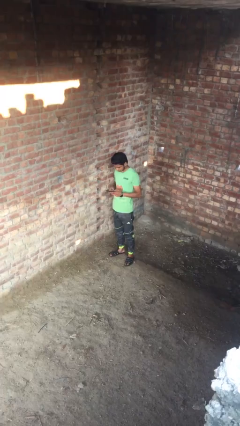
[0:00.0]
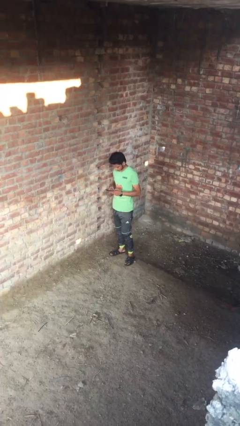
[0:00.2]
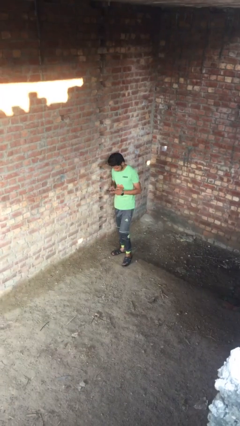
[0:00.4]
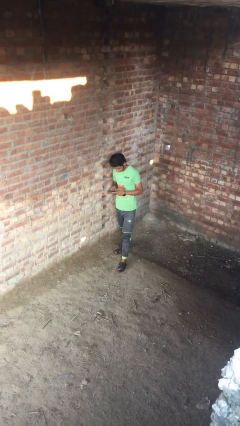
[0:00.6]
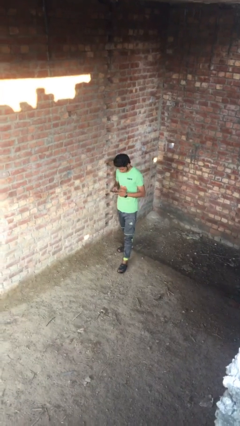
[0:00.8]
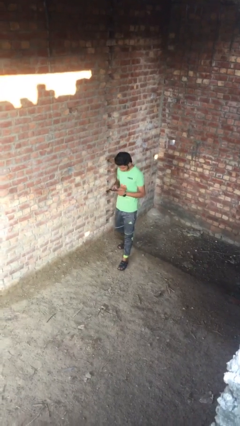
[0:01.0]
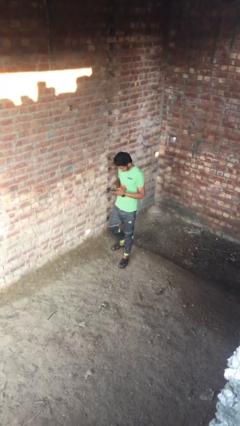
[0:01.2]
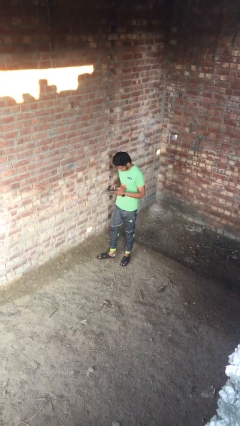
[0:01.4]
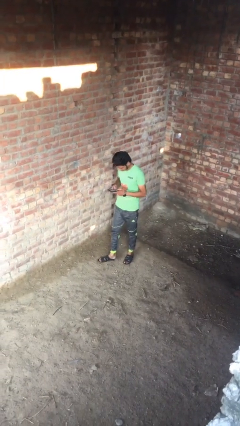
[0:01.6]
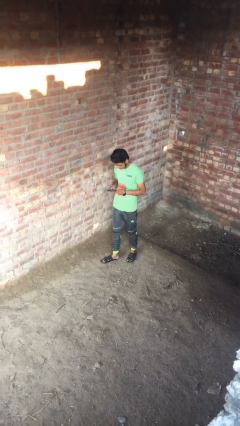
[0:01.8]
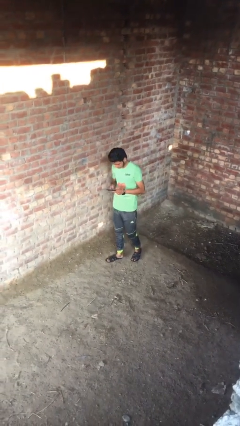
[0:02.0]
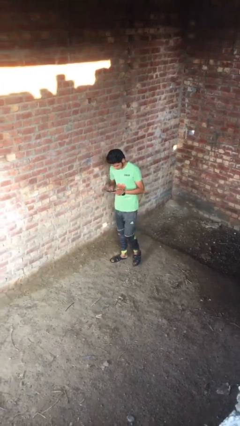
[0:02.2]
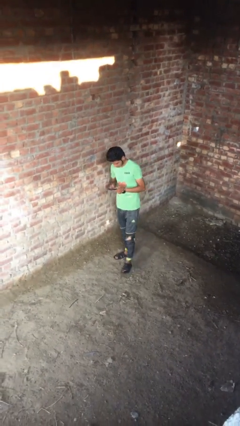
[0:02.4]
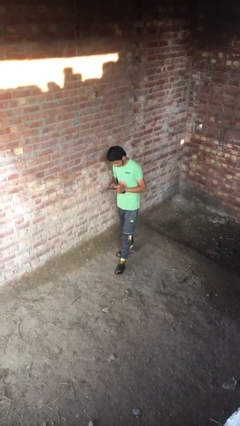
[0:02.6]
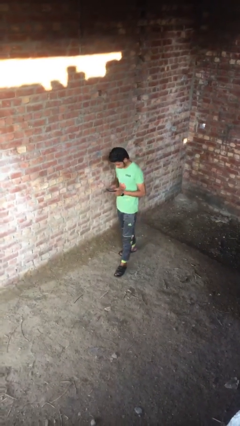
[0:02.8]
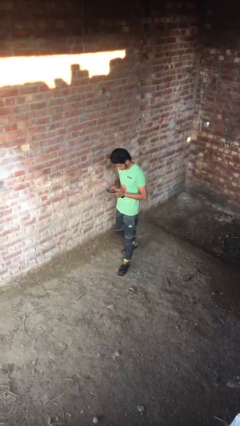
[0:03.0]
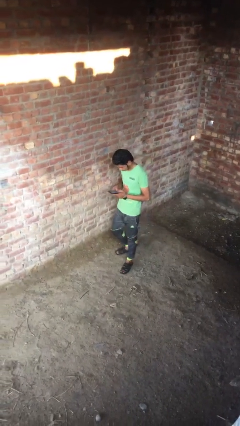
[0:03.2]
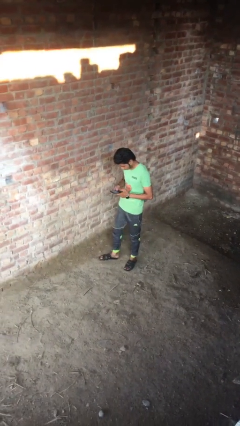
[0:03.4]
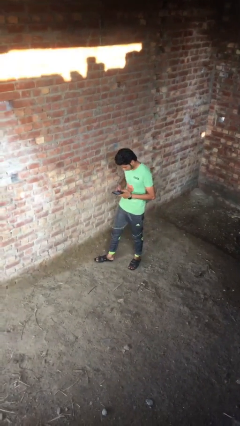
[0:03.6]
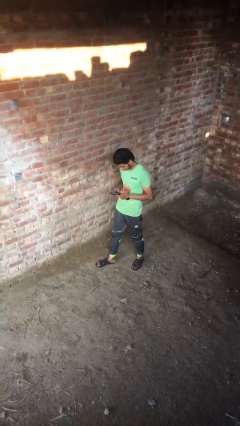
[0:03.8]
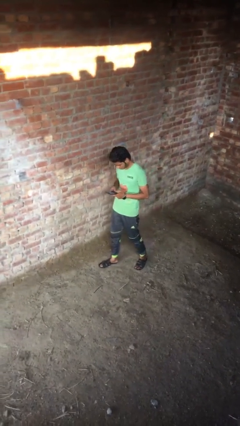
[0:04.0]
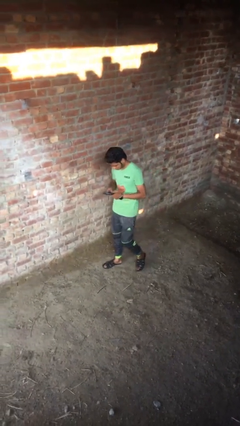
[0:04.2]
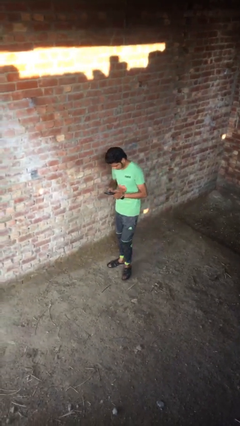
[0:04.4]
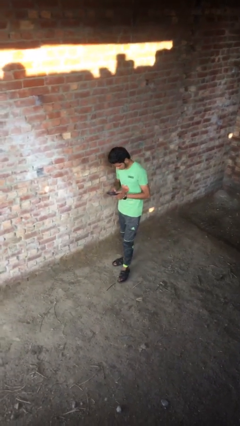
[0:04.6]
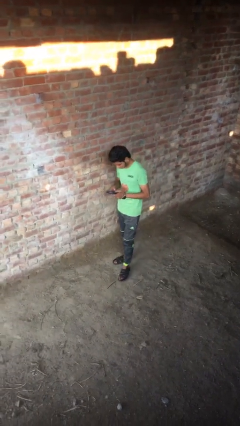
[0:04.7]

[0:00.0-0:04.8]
person texts on phone

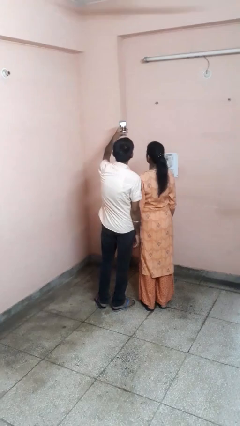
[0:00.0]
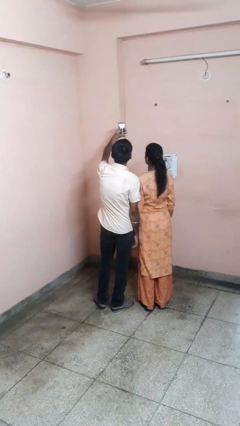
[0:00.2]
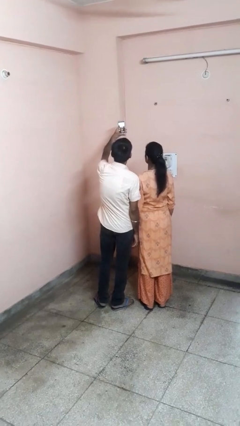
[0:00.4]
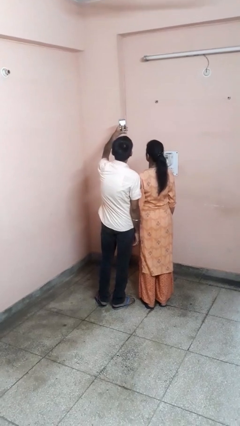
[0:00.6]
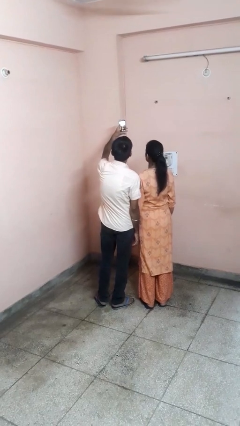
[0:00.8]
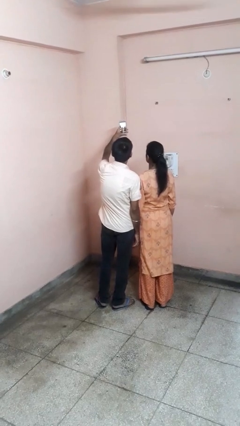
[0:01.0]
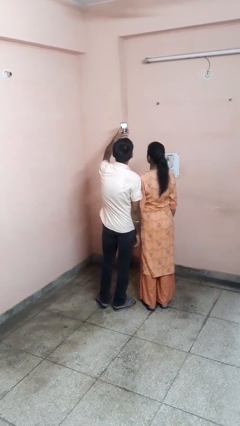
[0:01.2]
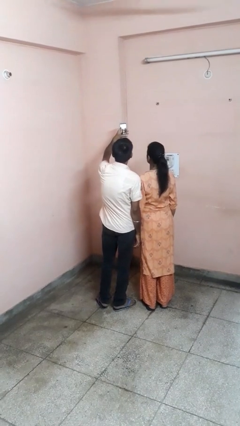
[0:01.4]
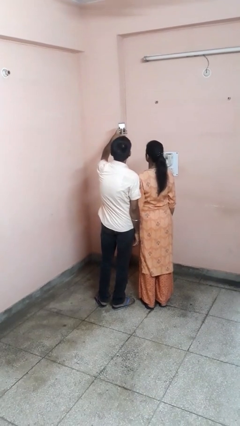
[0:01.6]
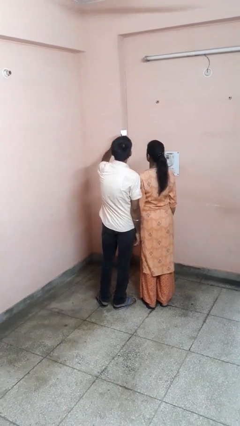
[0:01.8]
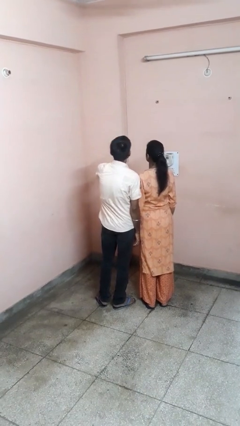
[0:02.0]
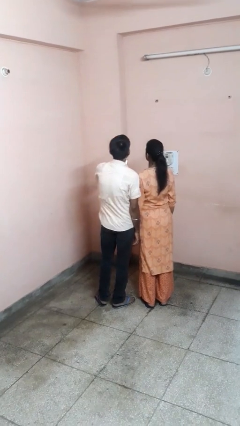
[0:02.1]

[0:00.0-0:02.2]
person takes selfie with person

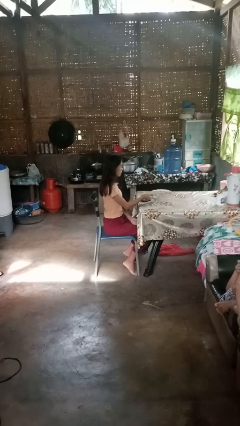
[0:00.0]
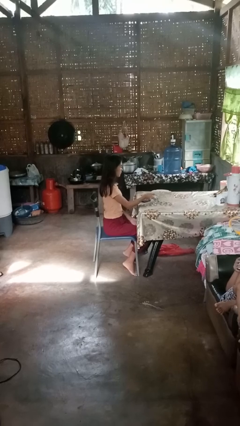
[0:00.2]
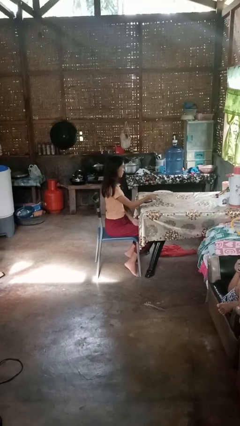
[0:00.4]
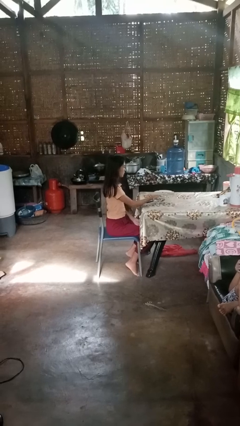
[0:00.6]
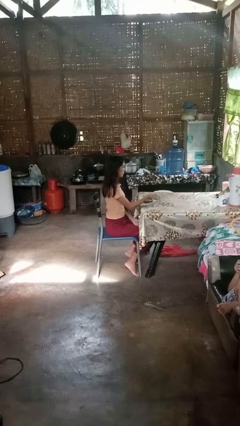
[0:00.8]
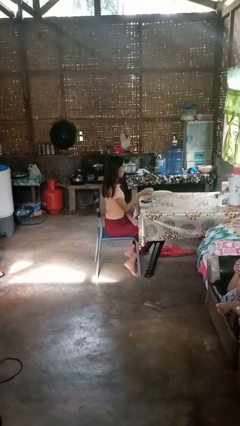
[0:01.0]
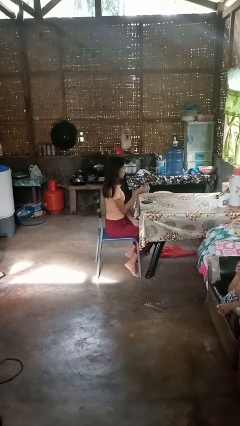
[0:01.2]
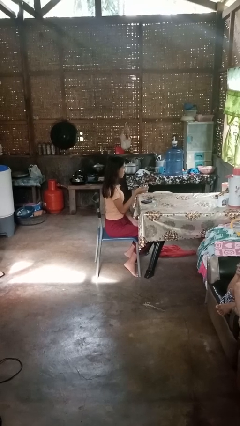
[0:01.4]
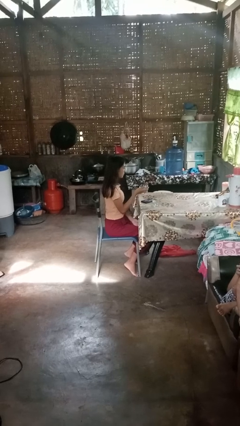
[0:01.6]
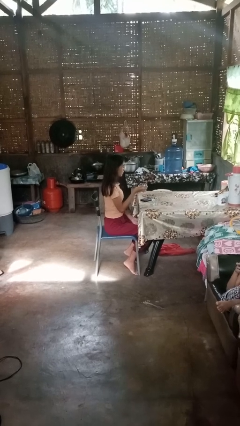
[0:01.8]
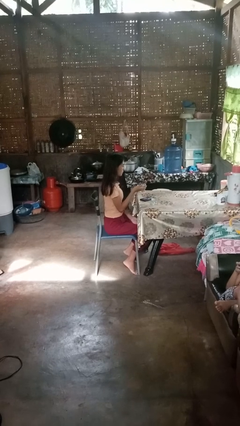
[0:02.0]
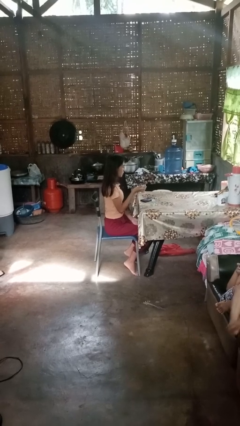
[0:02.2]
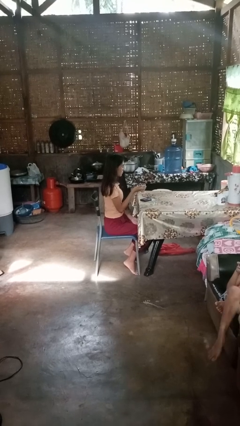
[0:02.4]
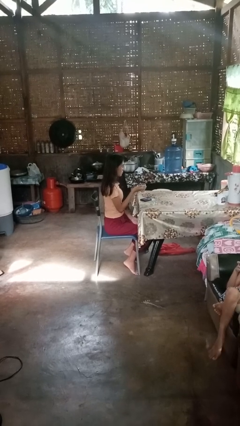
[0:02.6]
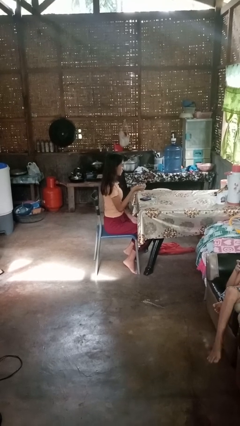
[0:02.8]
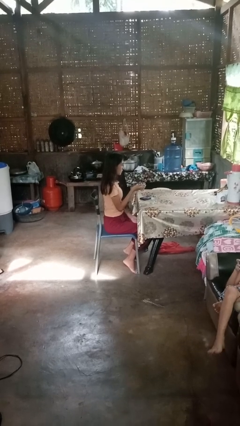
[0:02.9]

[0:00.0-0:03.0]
person picks up object from table

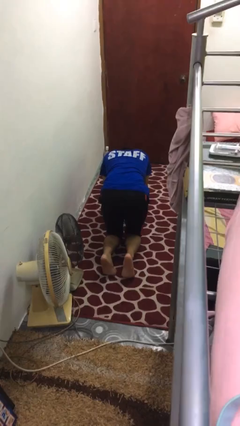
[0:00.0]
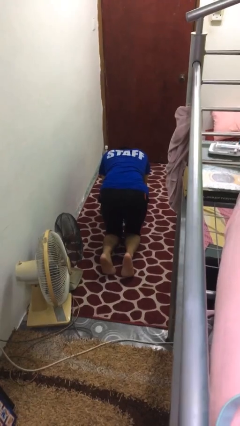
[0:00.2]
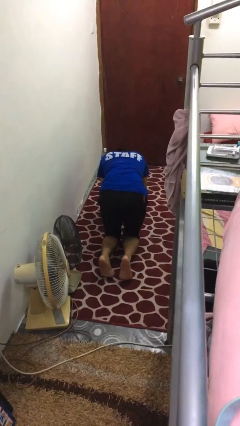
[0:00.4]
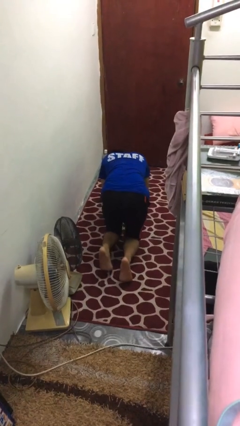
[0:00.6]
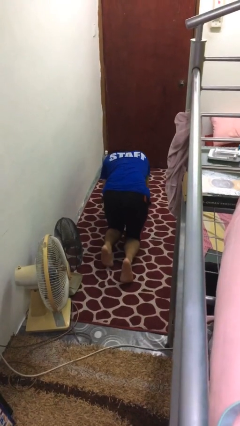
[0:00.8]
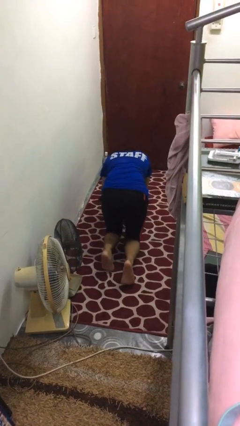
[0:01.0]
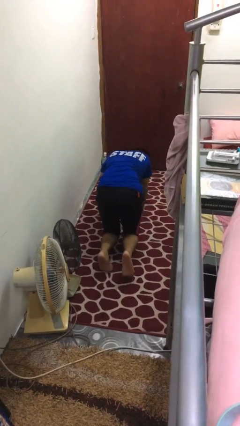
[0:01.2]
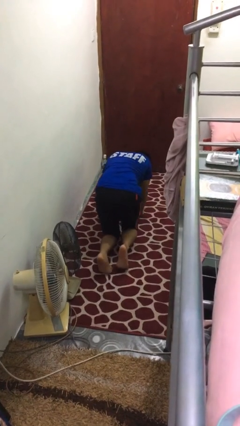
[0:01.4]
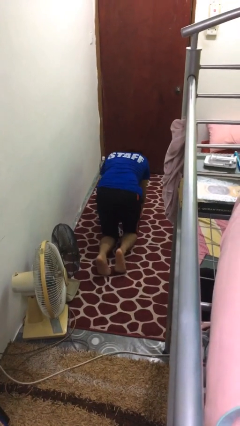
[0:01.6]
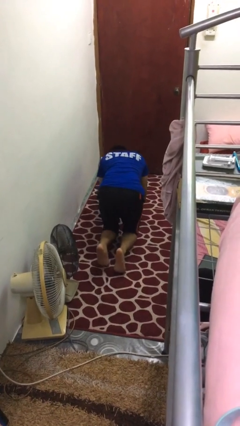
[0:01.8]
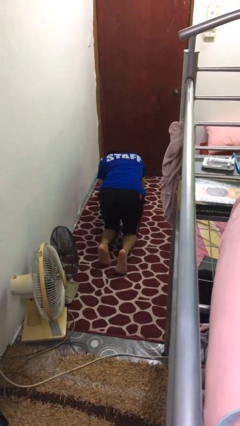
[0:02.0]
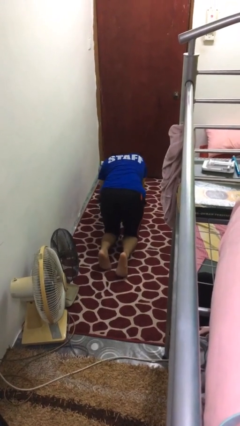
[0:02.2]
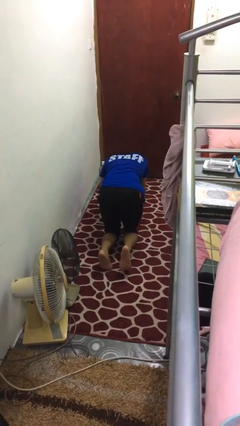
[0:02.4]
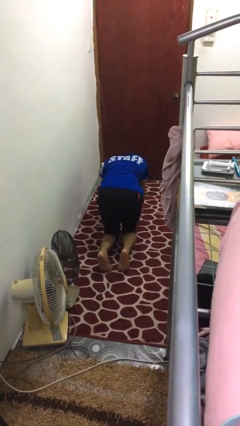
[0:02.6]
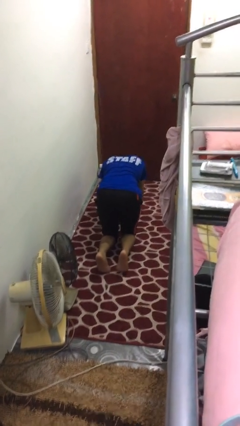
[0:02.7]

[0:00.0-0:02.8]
person crawls

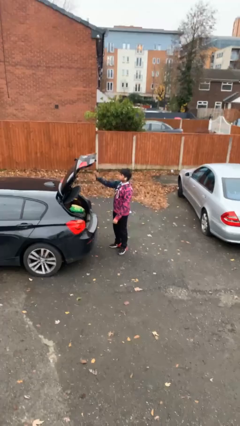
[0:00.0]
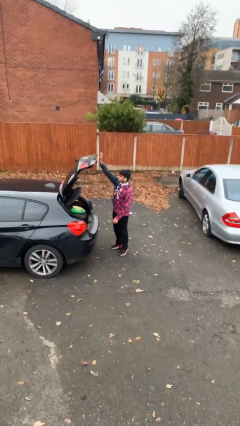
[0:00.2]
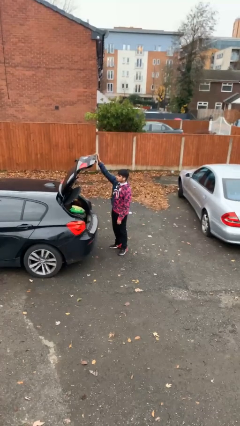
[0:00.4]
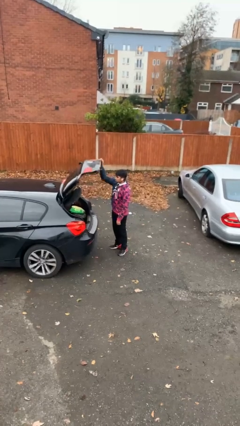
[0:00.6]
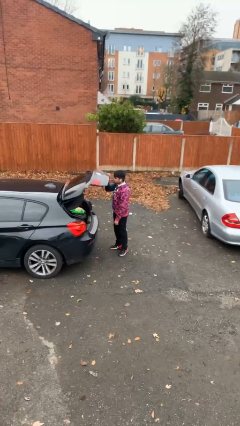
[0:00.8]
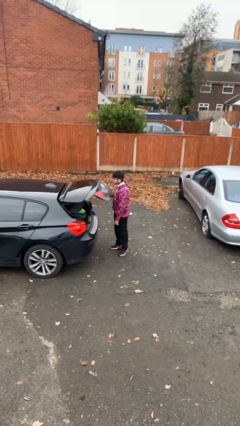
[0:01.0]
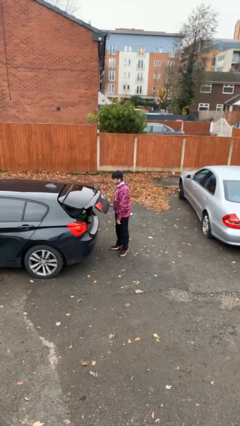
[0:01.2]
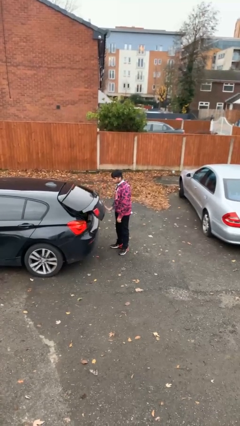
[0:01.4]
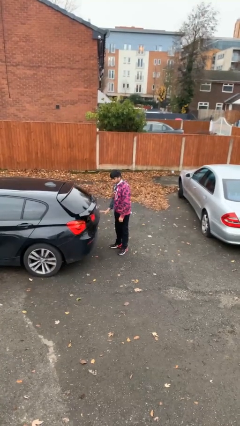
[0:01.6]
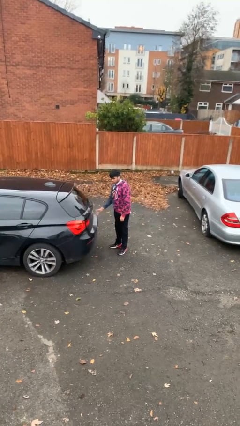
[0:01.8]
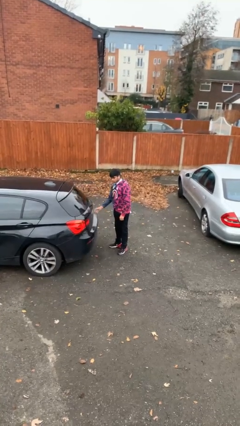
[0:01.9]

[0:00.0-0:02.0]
person closes car trunk

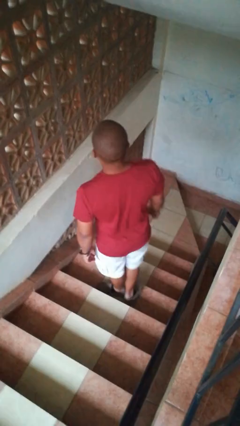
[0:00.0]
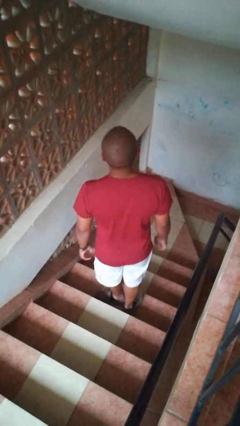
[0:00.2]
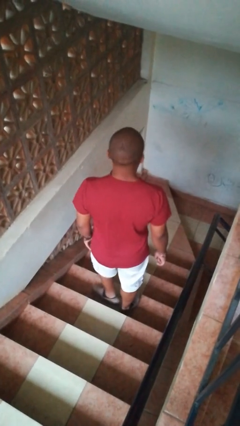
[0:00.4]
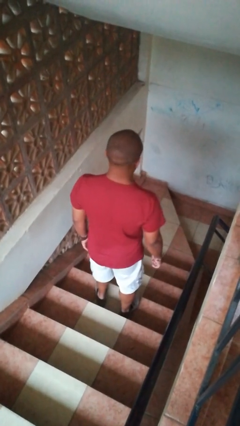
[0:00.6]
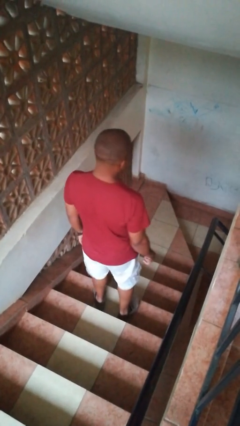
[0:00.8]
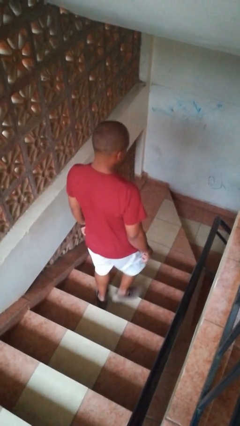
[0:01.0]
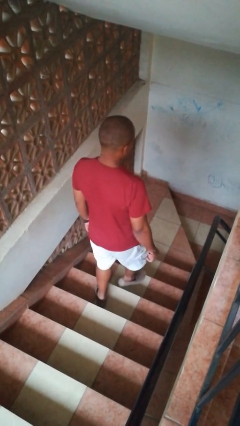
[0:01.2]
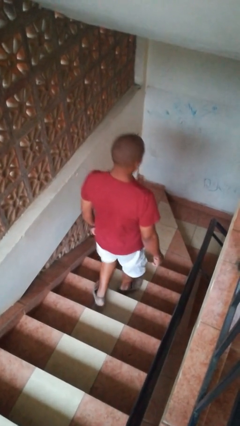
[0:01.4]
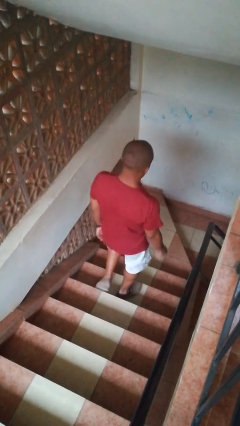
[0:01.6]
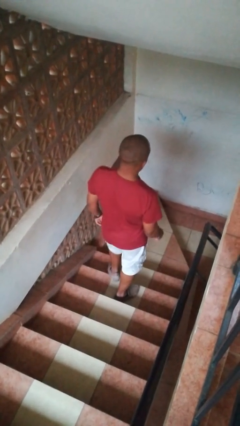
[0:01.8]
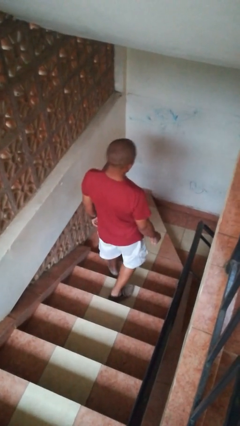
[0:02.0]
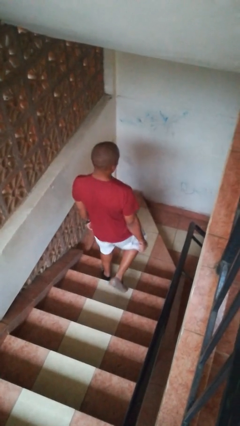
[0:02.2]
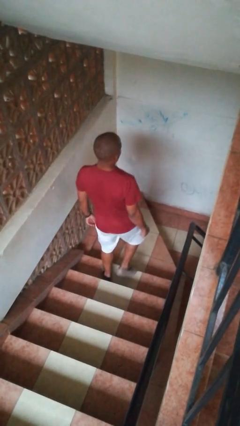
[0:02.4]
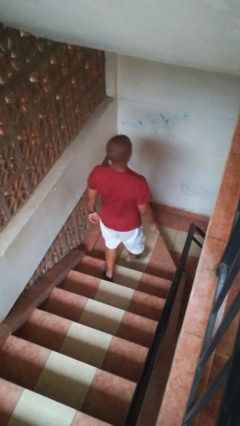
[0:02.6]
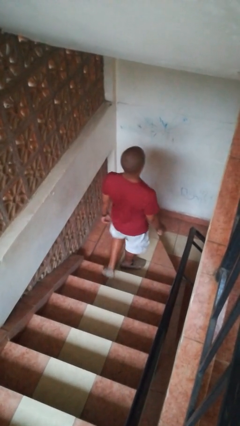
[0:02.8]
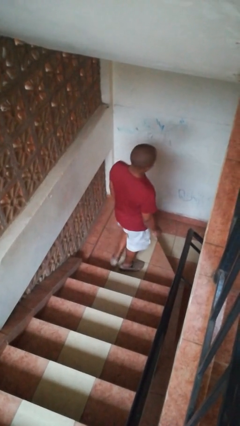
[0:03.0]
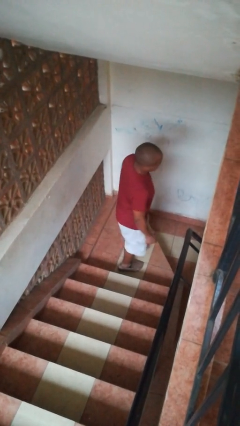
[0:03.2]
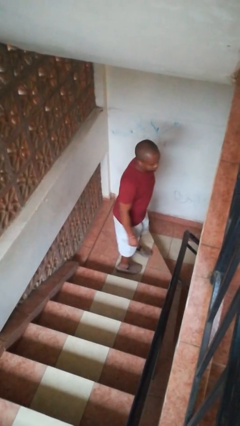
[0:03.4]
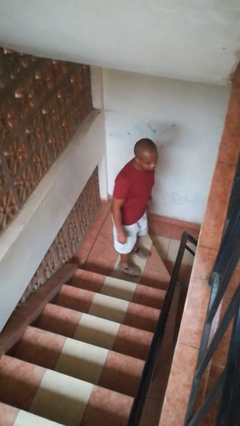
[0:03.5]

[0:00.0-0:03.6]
person climbs down stairs
